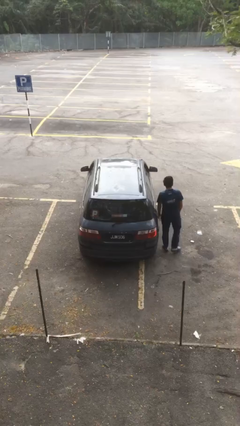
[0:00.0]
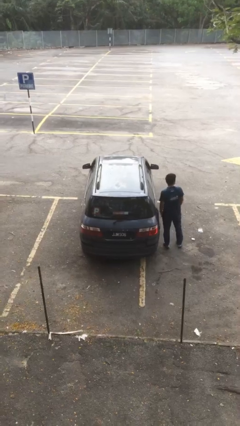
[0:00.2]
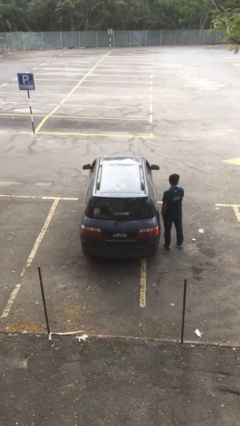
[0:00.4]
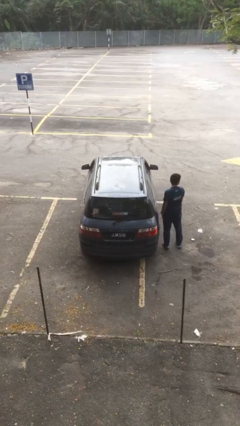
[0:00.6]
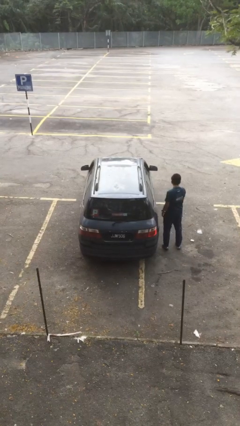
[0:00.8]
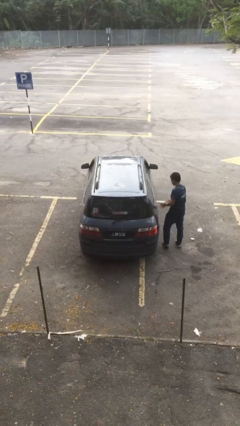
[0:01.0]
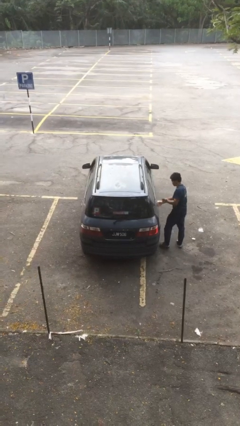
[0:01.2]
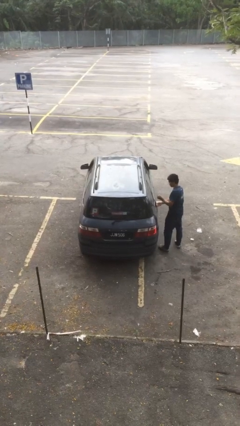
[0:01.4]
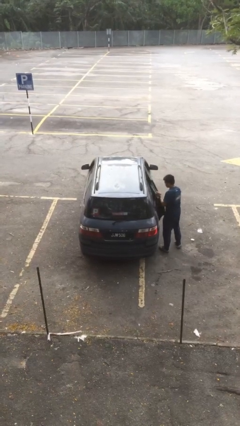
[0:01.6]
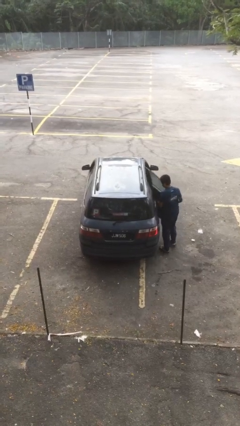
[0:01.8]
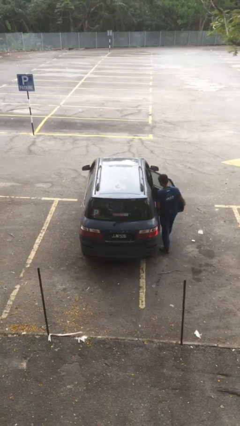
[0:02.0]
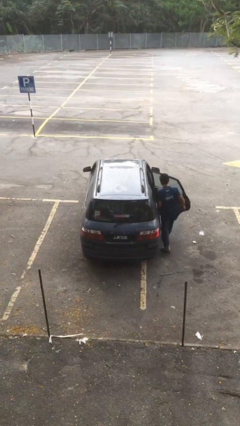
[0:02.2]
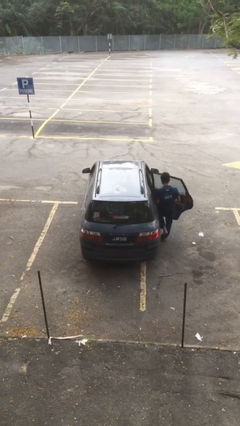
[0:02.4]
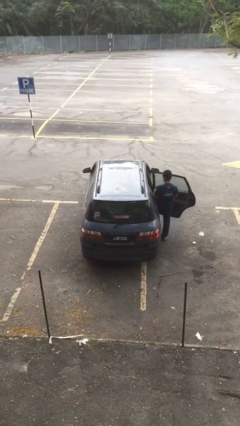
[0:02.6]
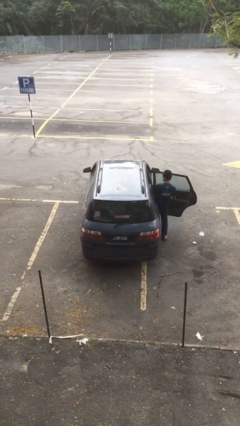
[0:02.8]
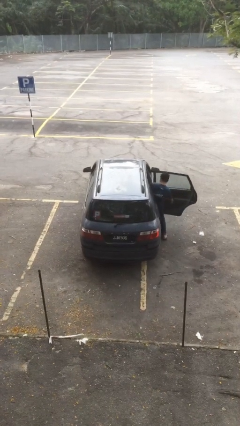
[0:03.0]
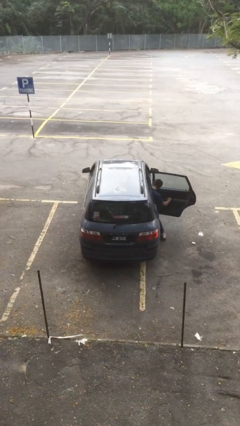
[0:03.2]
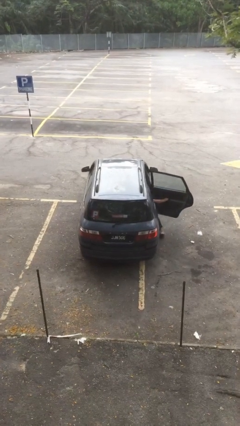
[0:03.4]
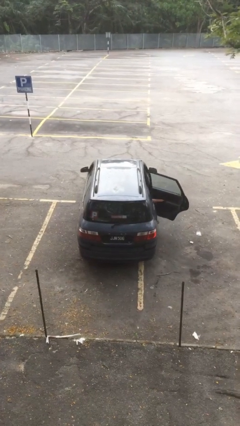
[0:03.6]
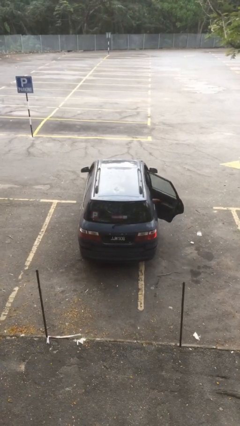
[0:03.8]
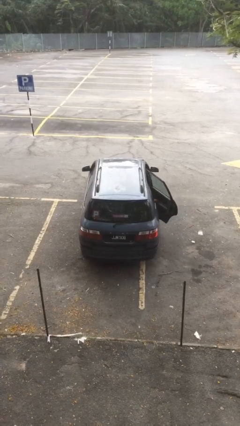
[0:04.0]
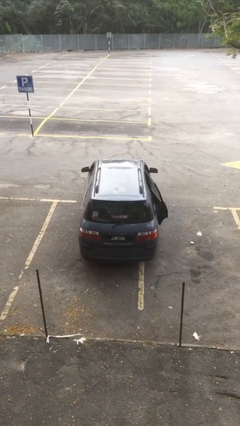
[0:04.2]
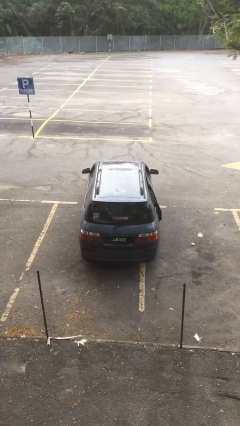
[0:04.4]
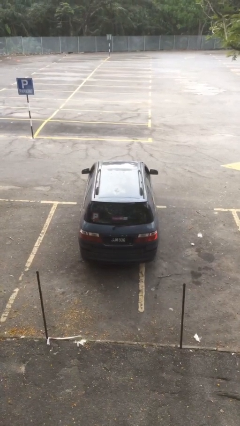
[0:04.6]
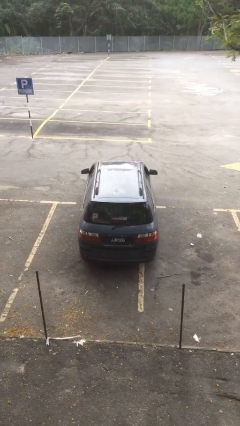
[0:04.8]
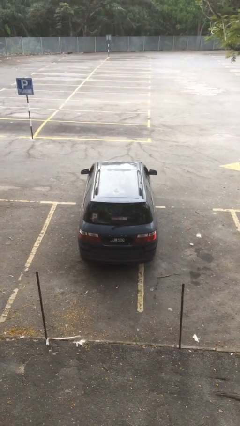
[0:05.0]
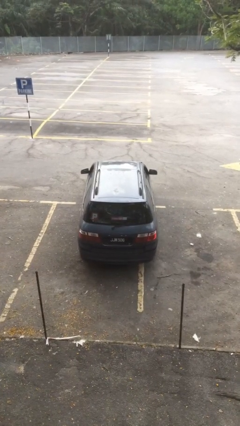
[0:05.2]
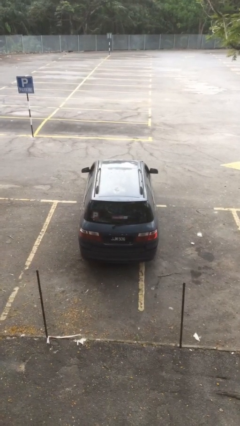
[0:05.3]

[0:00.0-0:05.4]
car picks up person

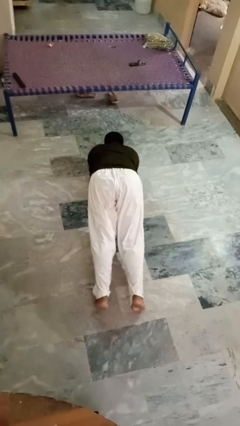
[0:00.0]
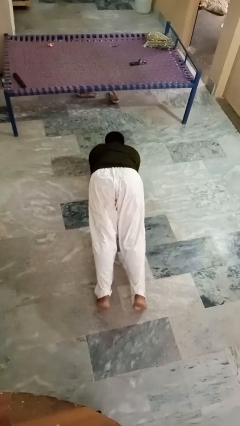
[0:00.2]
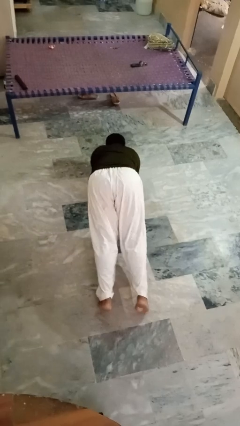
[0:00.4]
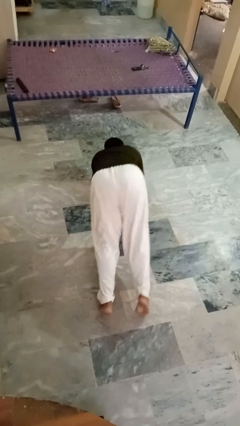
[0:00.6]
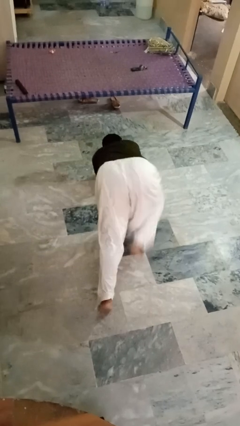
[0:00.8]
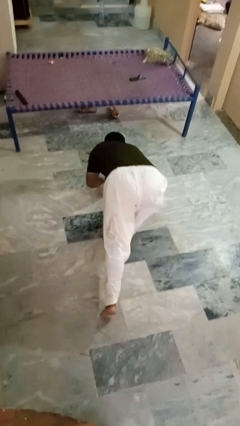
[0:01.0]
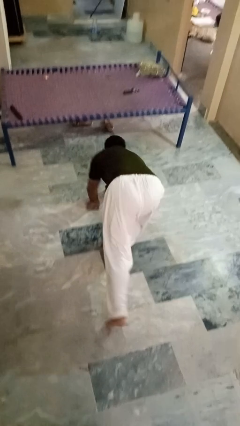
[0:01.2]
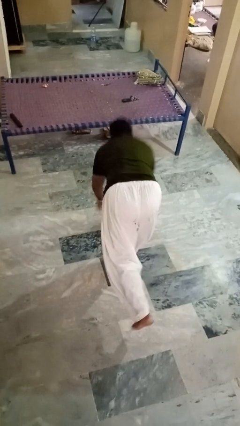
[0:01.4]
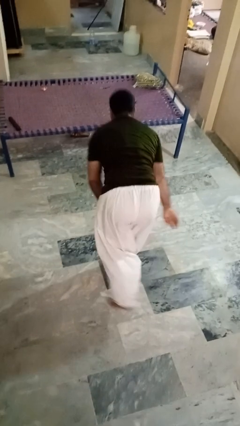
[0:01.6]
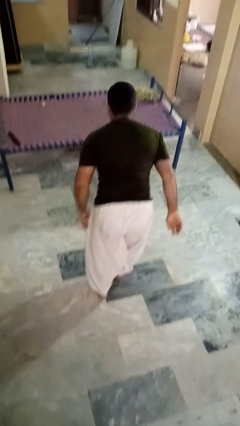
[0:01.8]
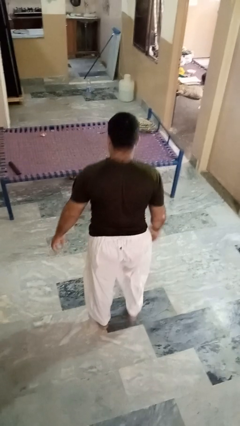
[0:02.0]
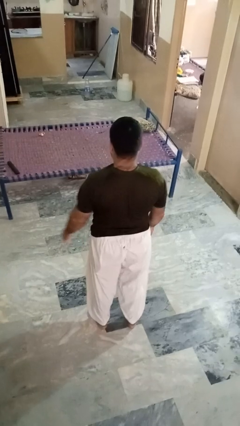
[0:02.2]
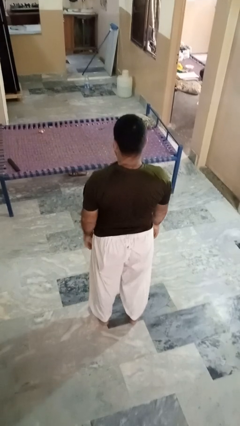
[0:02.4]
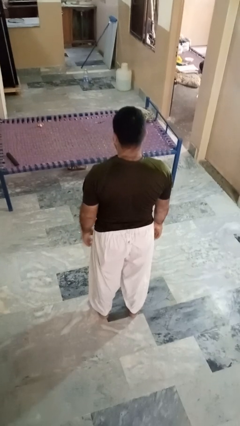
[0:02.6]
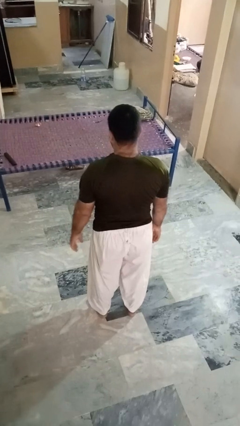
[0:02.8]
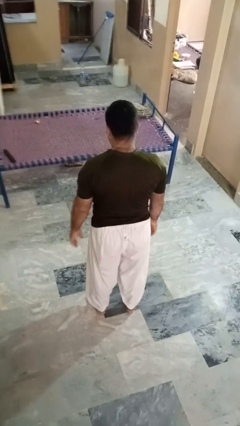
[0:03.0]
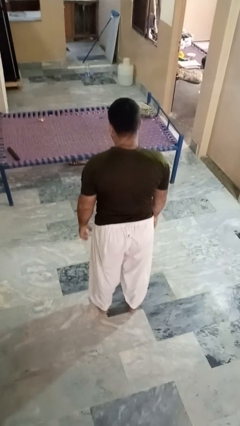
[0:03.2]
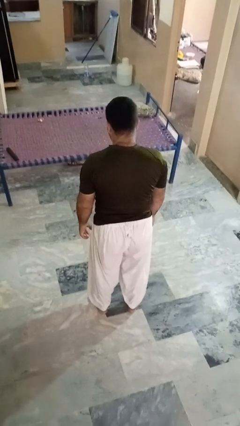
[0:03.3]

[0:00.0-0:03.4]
person stands up from floor

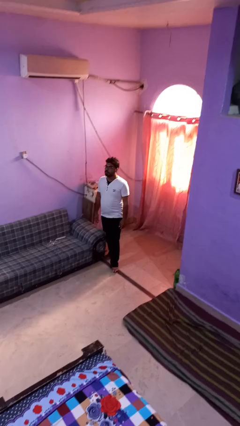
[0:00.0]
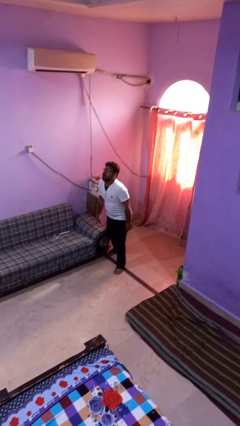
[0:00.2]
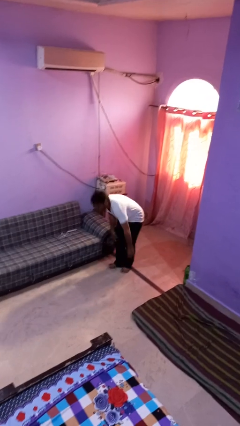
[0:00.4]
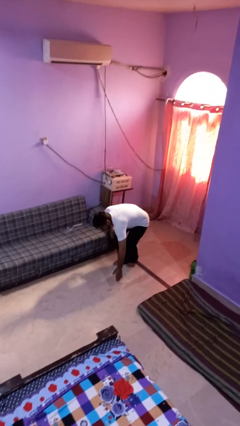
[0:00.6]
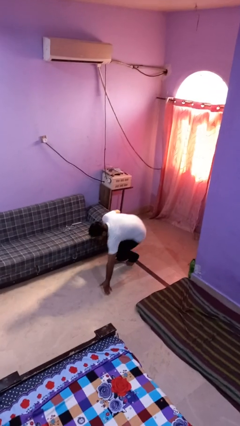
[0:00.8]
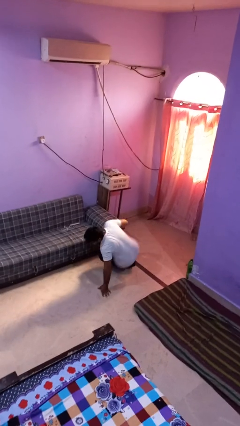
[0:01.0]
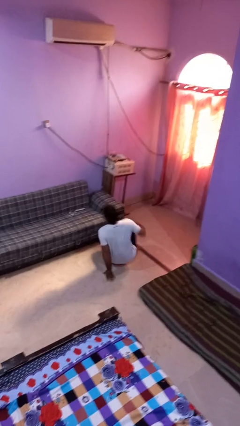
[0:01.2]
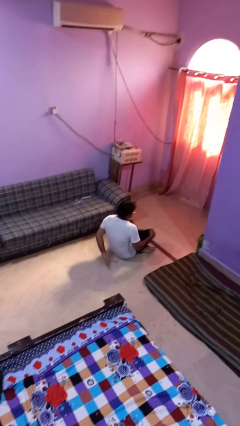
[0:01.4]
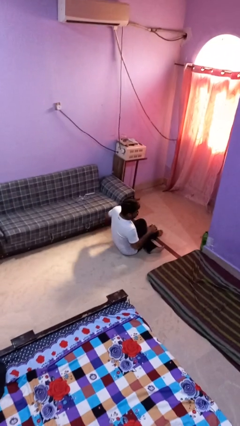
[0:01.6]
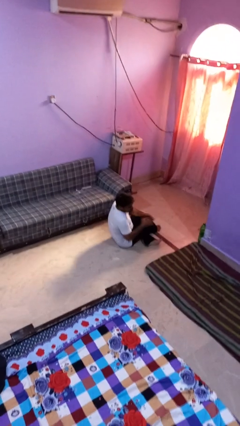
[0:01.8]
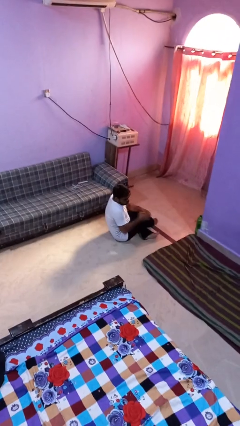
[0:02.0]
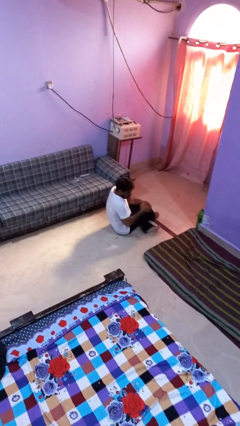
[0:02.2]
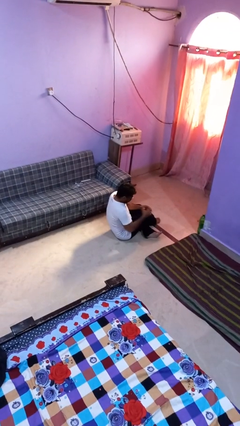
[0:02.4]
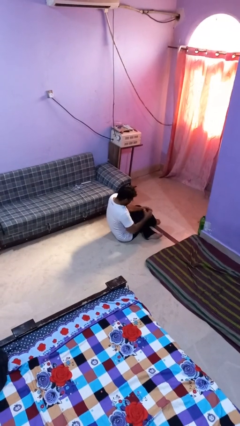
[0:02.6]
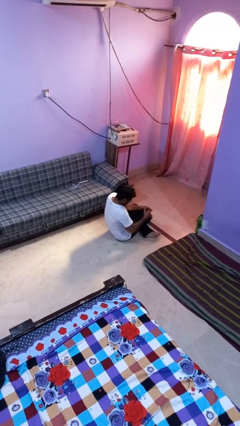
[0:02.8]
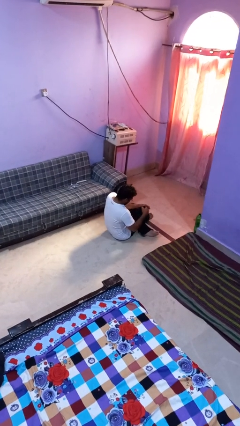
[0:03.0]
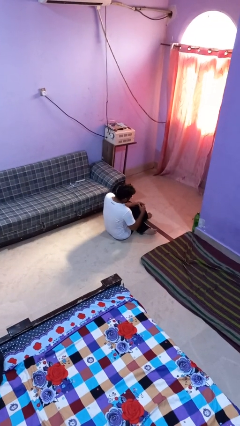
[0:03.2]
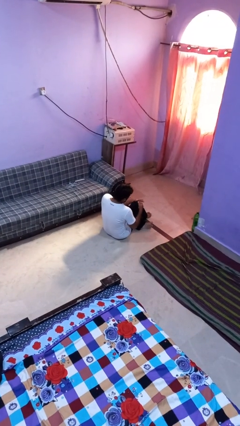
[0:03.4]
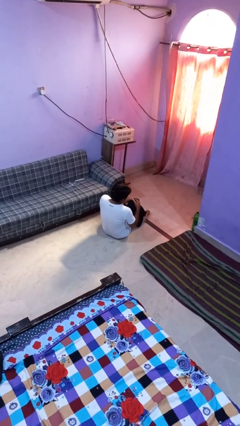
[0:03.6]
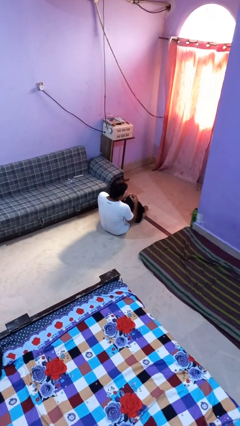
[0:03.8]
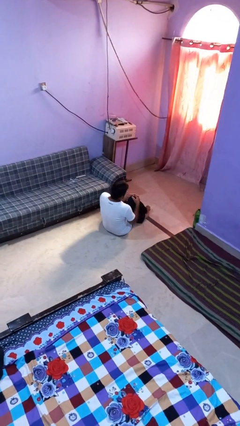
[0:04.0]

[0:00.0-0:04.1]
person trips on object on floor

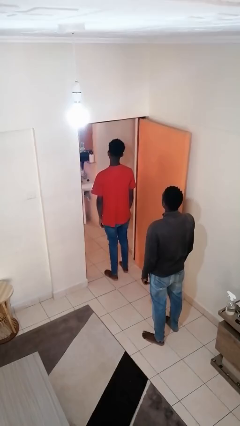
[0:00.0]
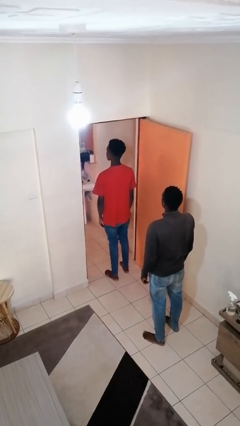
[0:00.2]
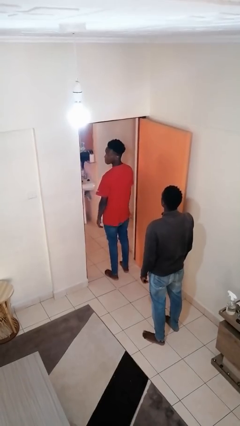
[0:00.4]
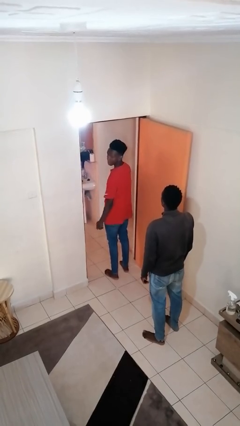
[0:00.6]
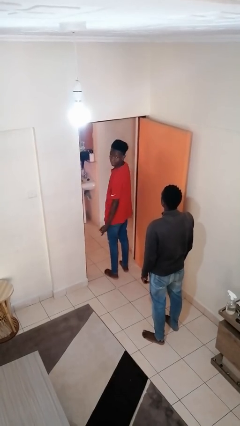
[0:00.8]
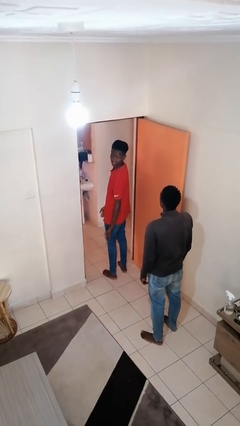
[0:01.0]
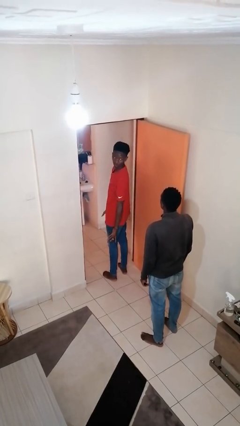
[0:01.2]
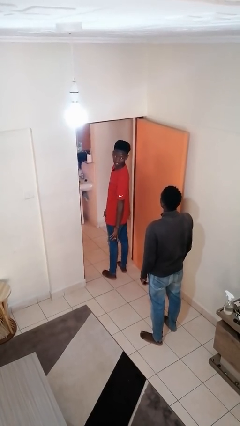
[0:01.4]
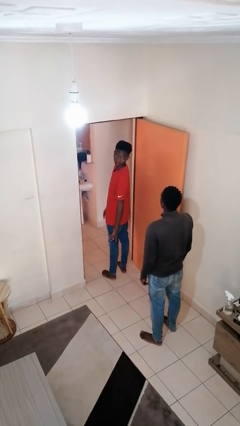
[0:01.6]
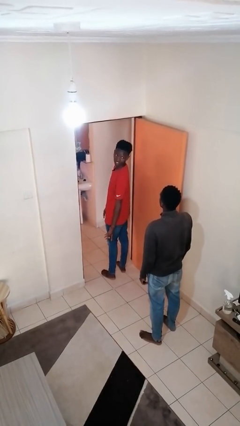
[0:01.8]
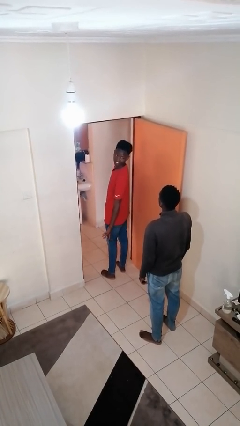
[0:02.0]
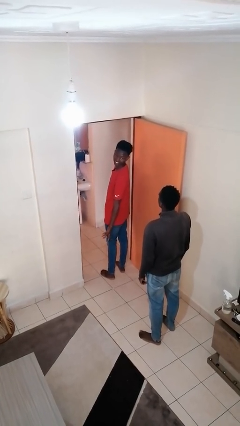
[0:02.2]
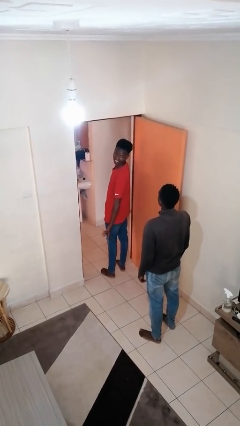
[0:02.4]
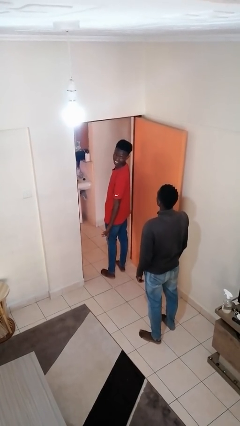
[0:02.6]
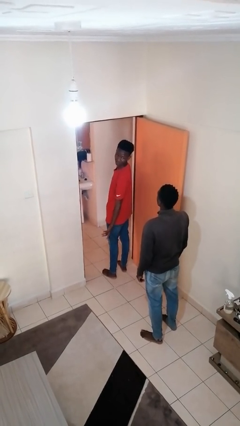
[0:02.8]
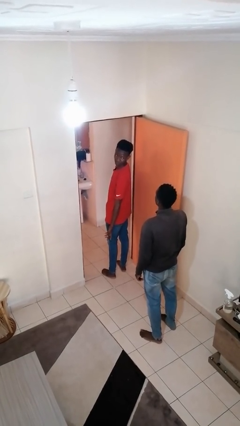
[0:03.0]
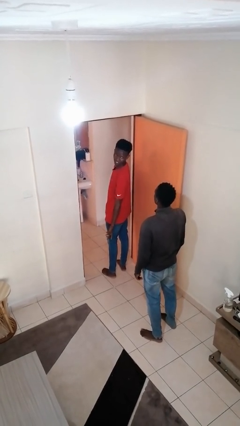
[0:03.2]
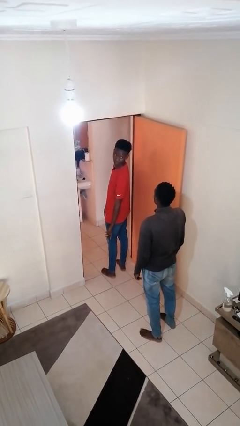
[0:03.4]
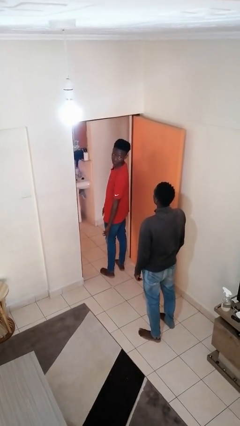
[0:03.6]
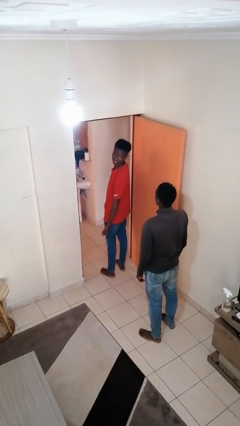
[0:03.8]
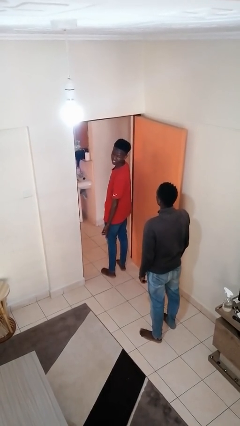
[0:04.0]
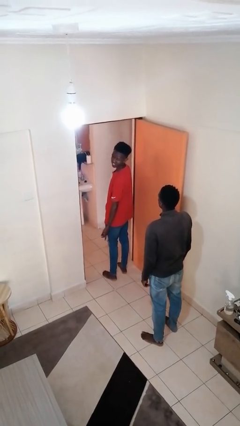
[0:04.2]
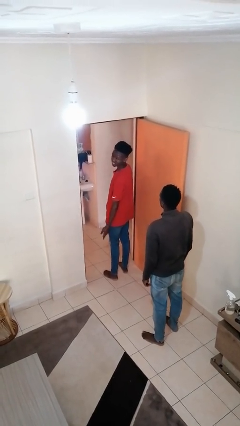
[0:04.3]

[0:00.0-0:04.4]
person looks over shoulder

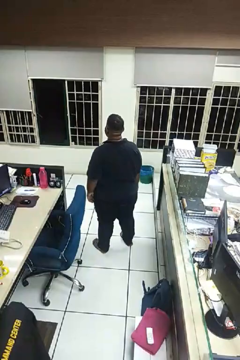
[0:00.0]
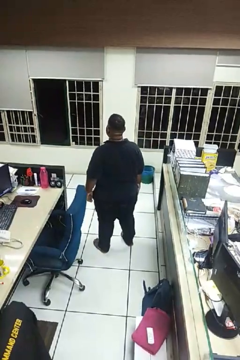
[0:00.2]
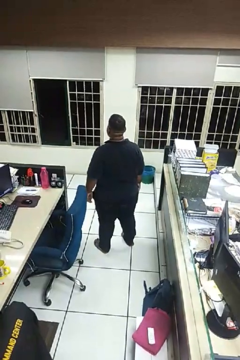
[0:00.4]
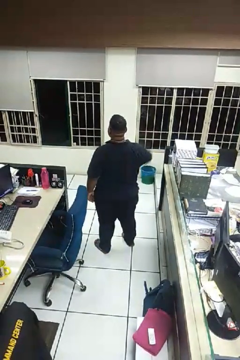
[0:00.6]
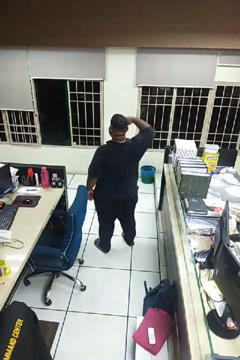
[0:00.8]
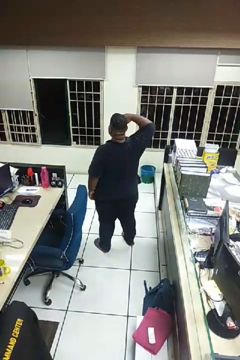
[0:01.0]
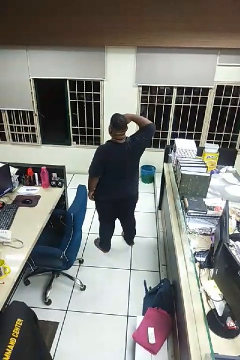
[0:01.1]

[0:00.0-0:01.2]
person salutes
